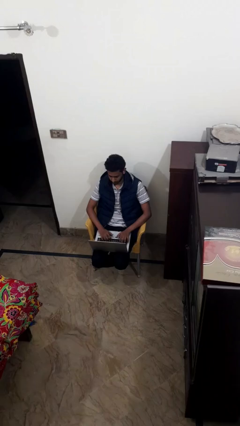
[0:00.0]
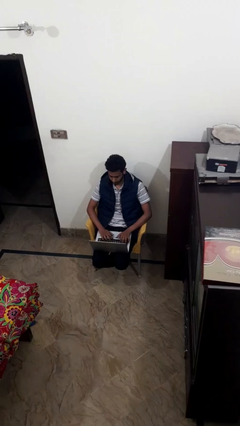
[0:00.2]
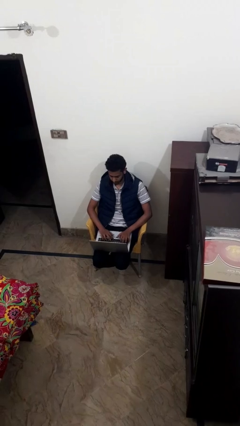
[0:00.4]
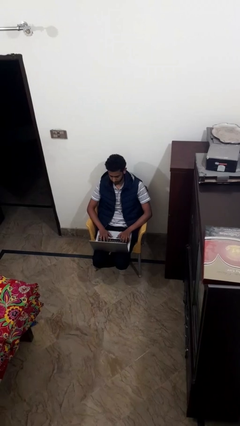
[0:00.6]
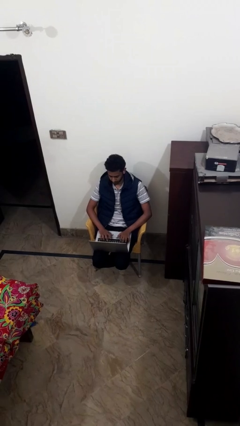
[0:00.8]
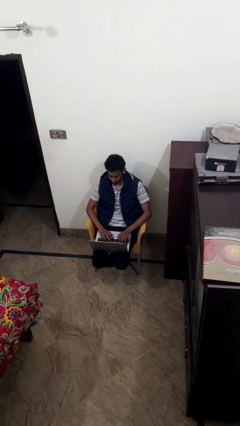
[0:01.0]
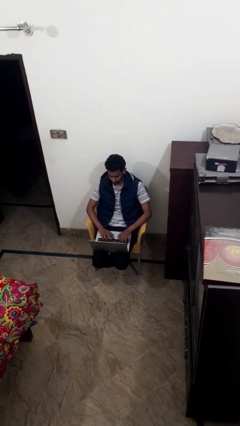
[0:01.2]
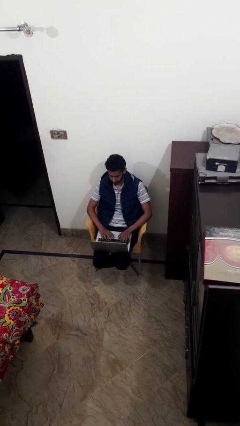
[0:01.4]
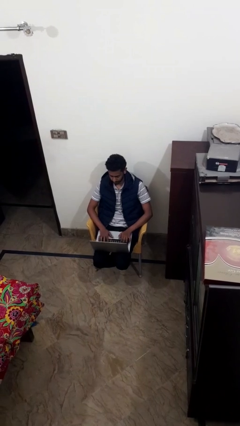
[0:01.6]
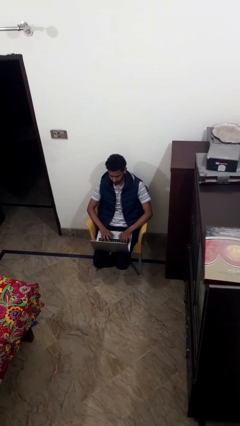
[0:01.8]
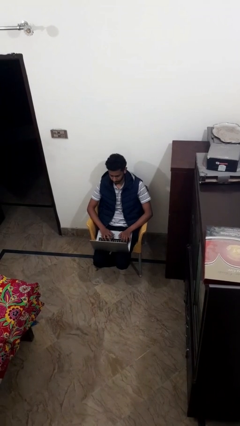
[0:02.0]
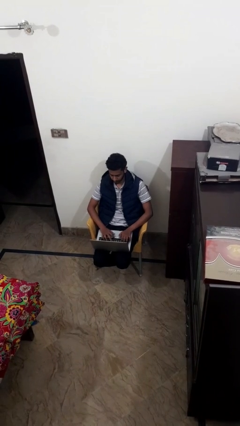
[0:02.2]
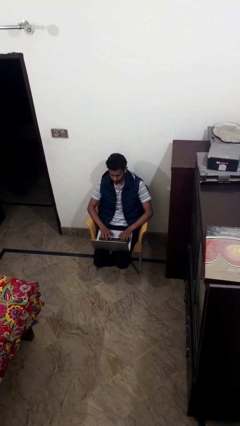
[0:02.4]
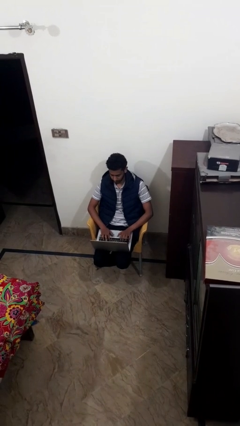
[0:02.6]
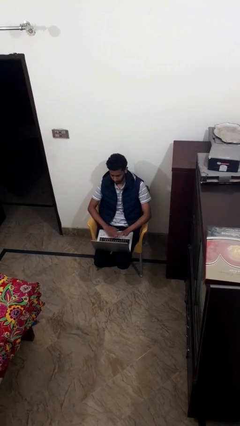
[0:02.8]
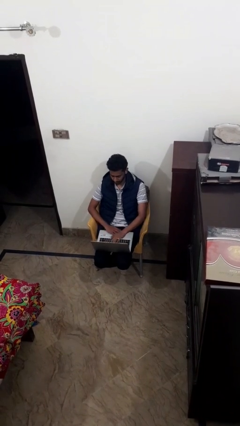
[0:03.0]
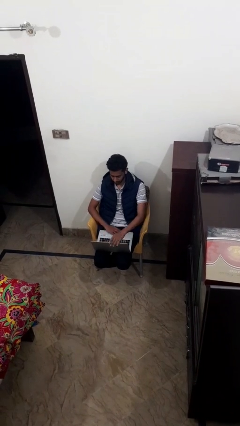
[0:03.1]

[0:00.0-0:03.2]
person interacts with laptop

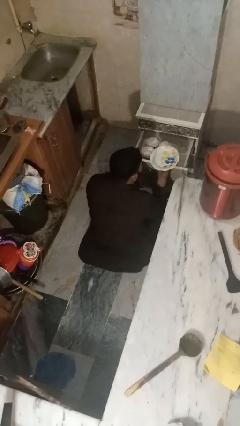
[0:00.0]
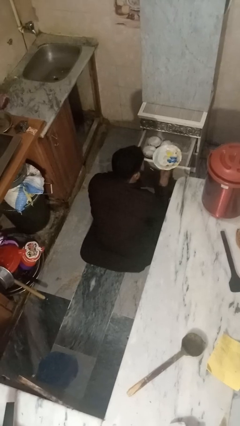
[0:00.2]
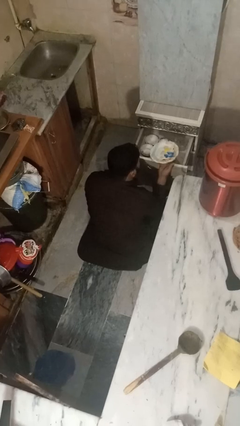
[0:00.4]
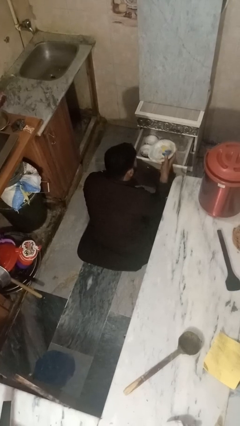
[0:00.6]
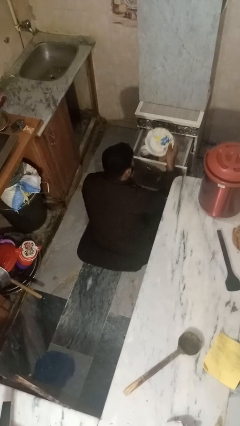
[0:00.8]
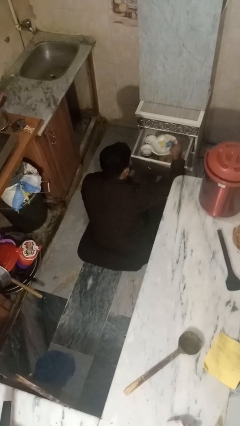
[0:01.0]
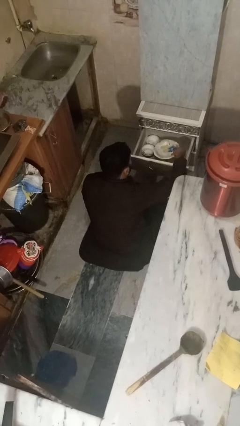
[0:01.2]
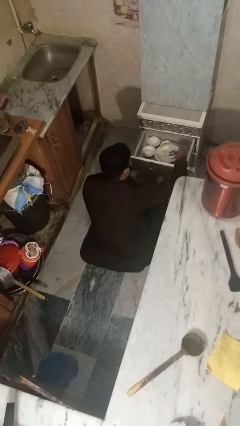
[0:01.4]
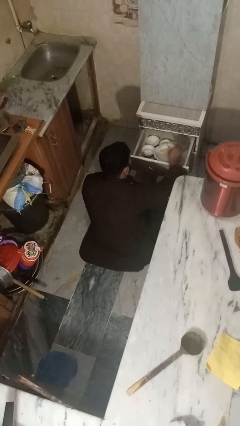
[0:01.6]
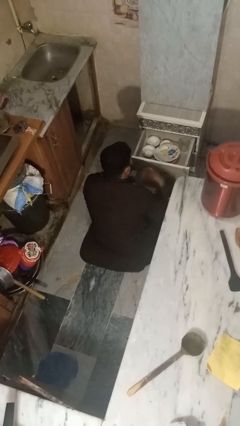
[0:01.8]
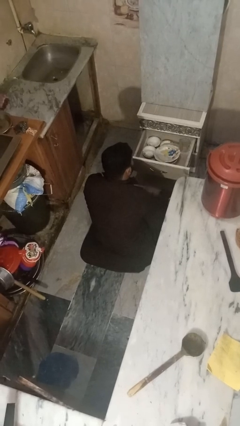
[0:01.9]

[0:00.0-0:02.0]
person puts object into kitchen drawer

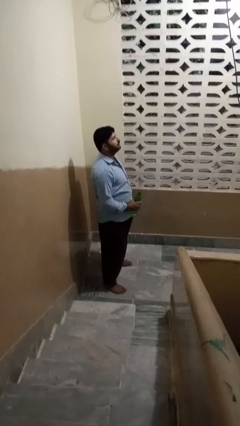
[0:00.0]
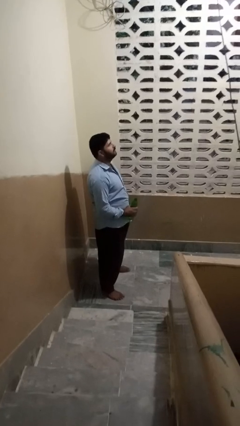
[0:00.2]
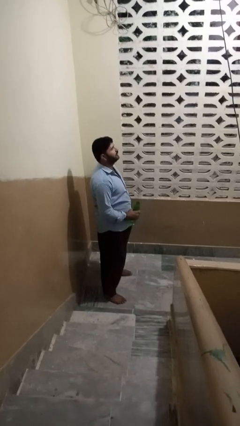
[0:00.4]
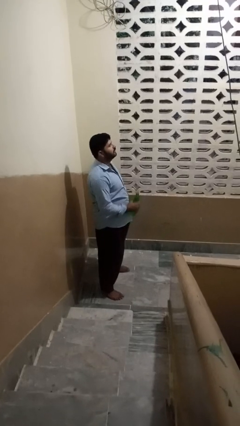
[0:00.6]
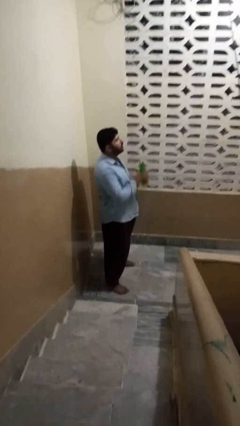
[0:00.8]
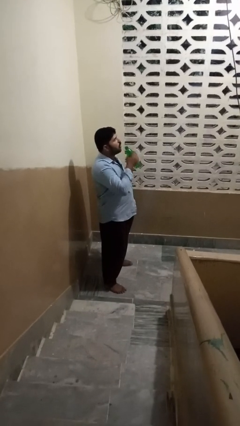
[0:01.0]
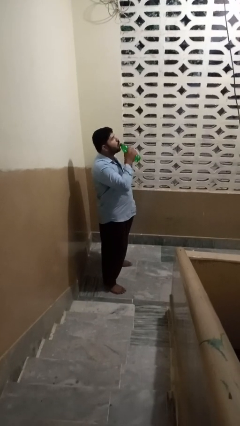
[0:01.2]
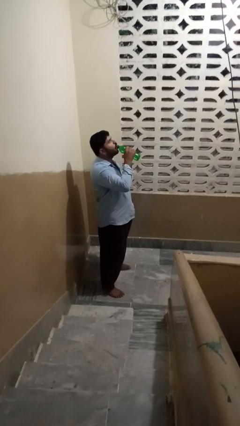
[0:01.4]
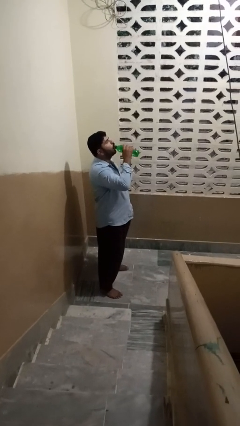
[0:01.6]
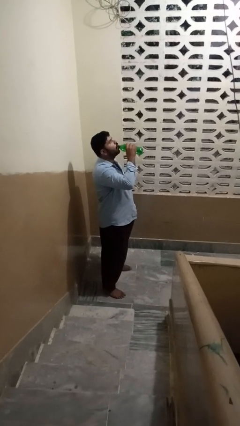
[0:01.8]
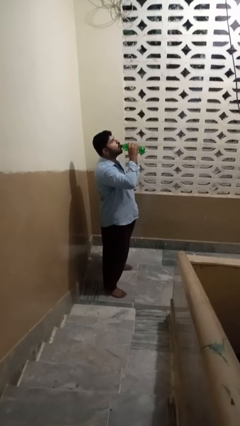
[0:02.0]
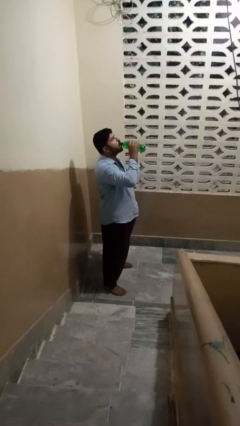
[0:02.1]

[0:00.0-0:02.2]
person drinks from bottle

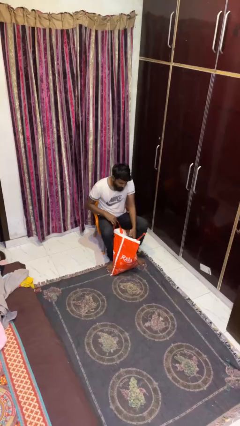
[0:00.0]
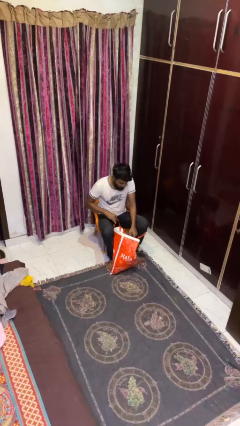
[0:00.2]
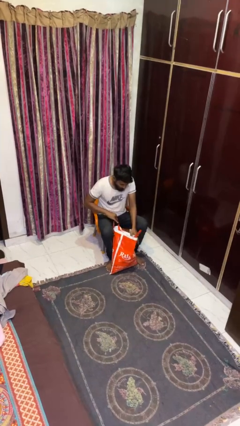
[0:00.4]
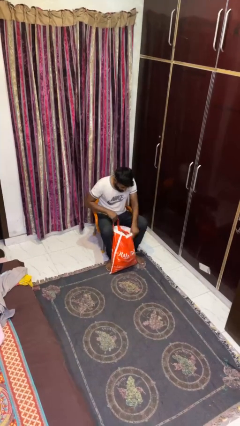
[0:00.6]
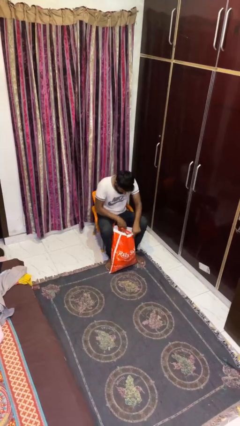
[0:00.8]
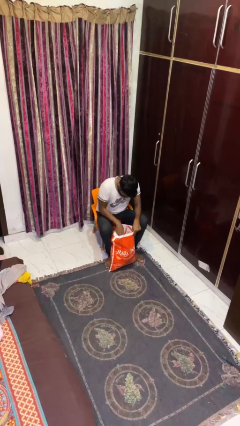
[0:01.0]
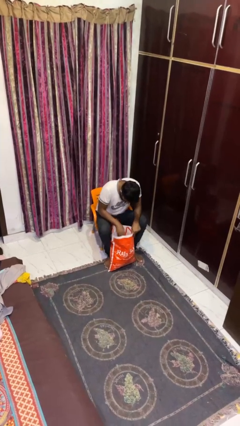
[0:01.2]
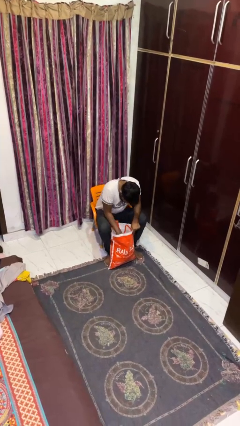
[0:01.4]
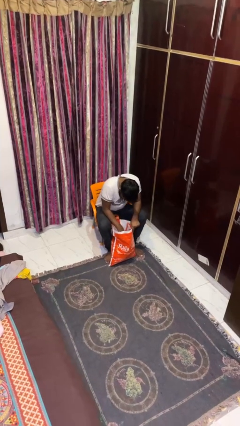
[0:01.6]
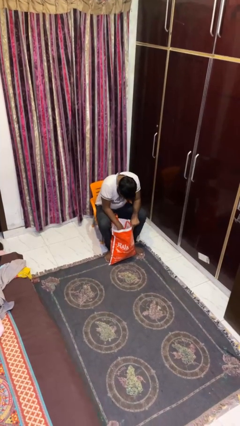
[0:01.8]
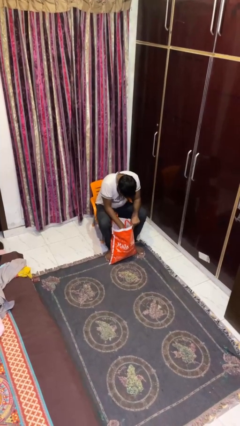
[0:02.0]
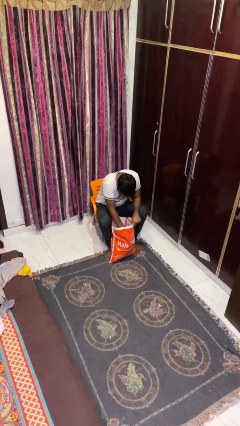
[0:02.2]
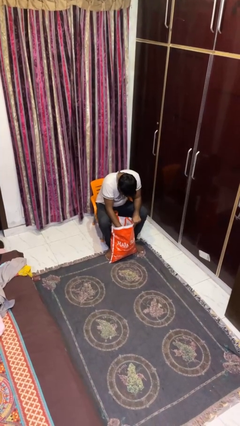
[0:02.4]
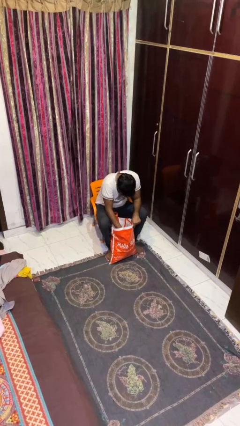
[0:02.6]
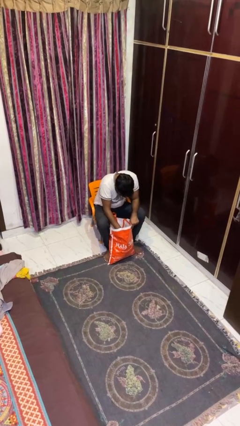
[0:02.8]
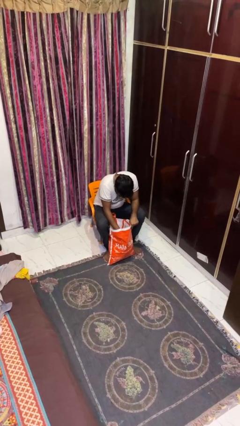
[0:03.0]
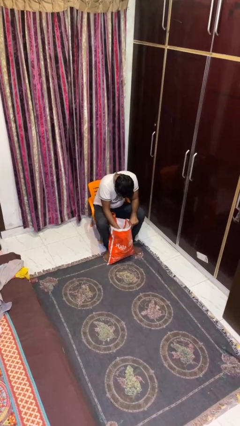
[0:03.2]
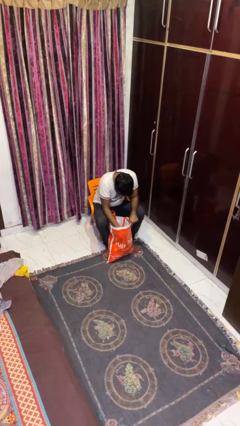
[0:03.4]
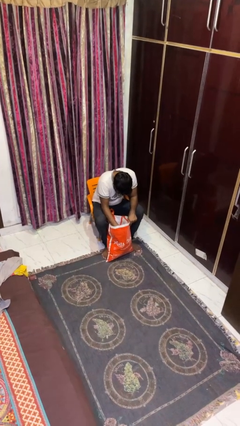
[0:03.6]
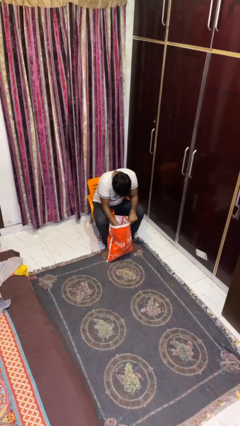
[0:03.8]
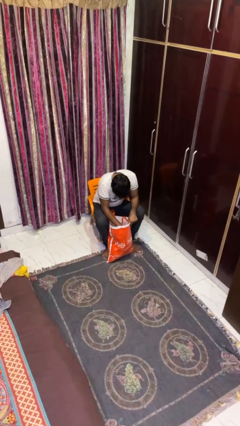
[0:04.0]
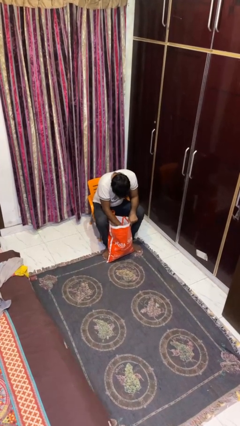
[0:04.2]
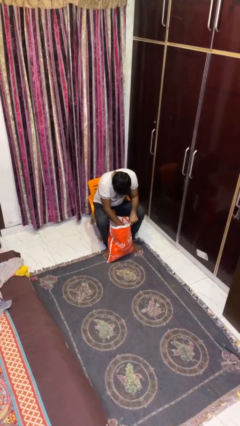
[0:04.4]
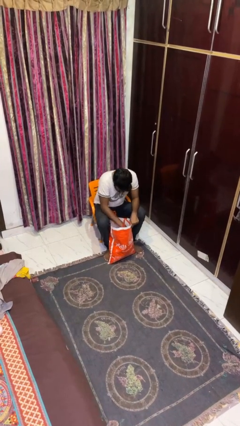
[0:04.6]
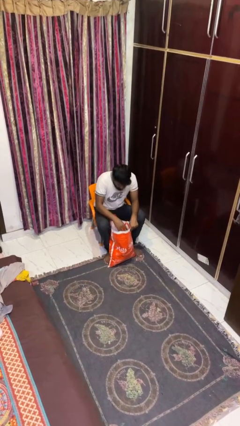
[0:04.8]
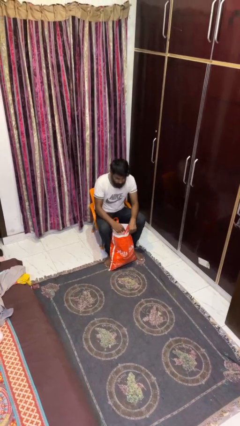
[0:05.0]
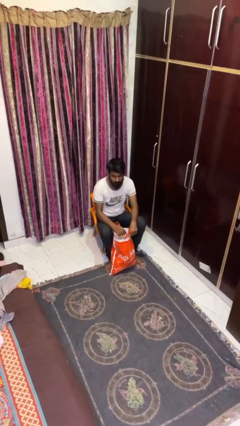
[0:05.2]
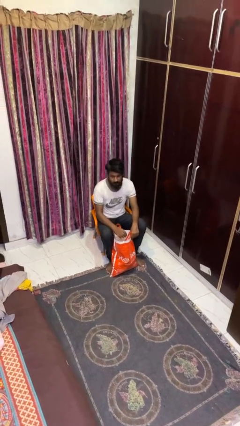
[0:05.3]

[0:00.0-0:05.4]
person searches in bag

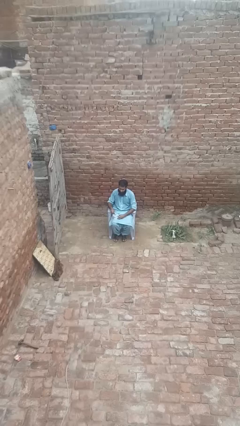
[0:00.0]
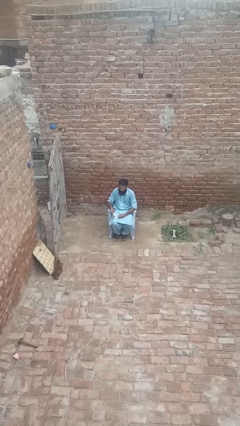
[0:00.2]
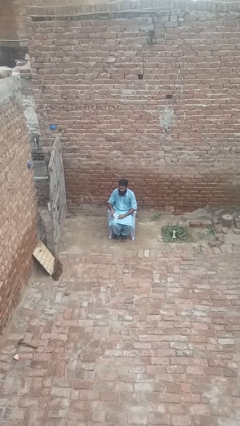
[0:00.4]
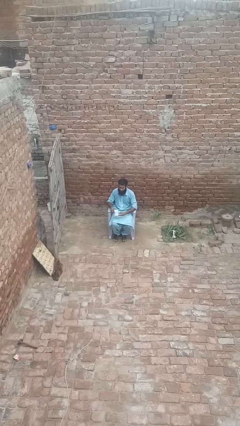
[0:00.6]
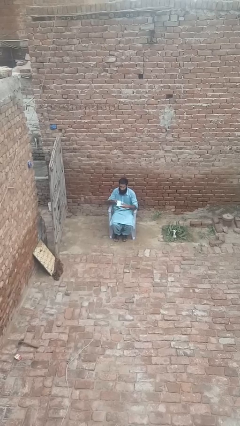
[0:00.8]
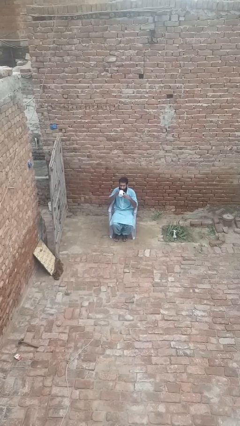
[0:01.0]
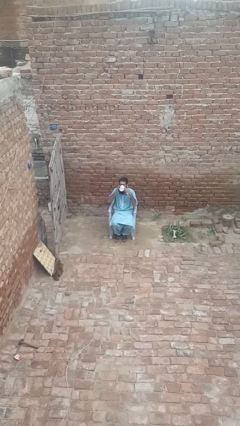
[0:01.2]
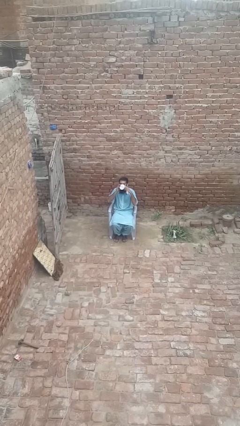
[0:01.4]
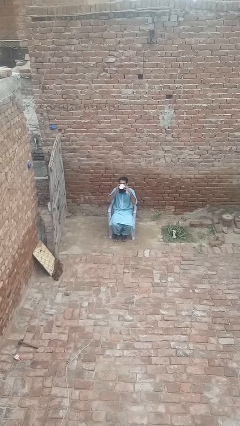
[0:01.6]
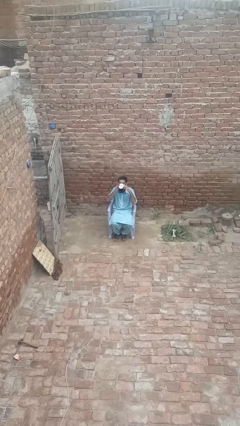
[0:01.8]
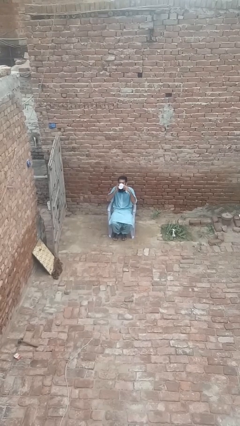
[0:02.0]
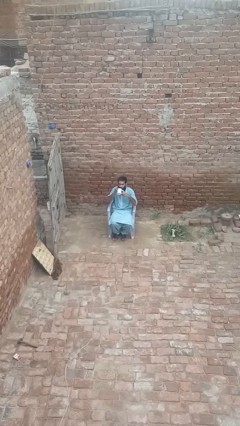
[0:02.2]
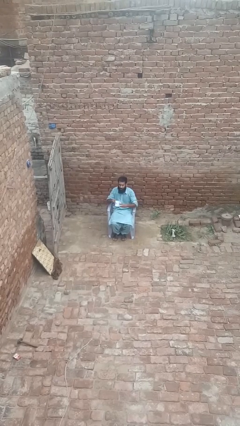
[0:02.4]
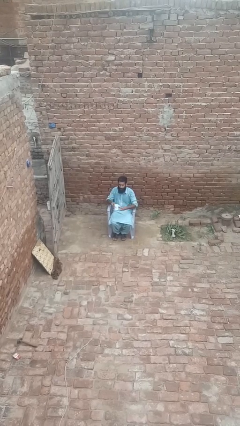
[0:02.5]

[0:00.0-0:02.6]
person drinks from mug

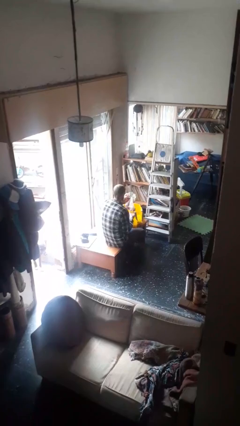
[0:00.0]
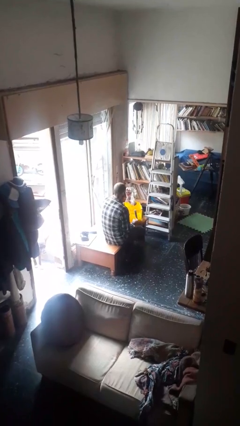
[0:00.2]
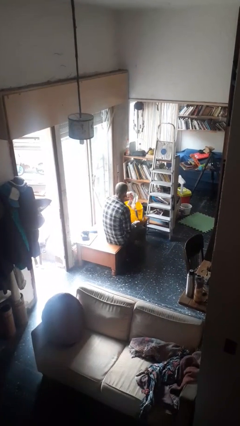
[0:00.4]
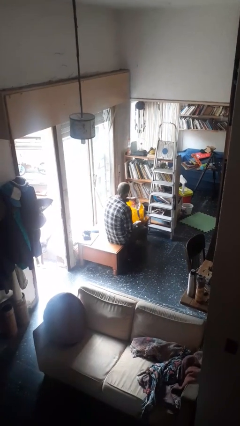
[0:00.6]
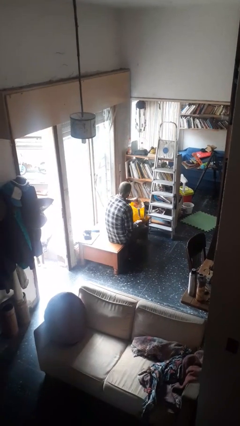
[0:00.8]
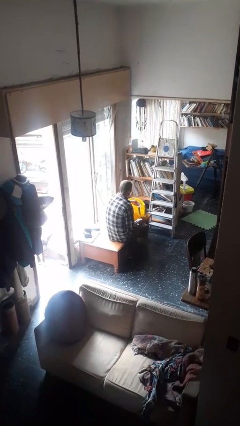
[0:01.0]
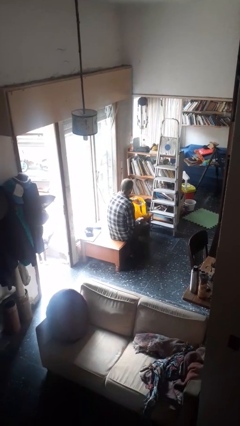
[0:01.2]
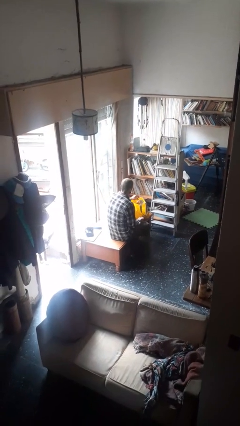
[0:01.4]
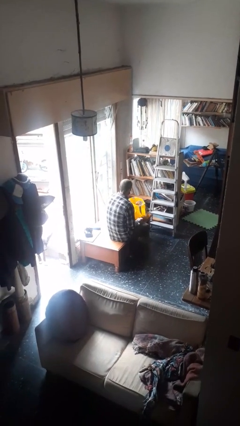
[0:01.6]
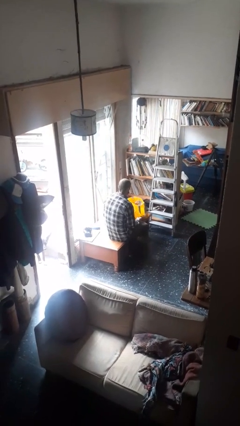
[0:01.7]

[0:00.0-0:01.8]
person puts object into bag

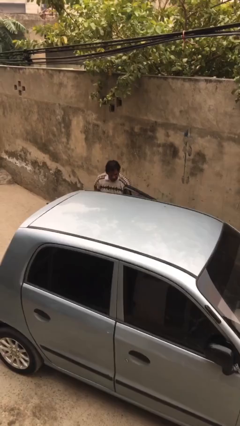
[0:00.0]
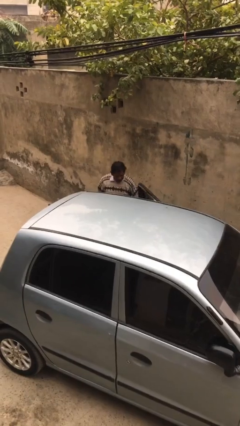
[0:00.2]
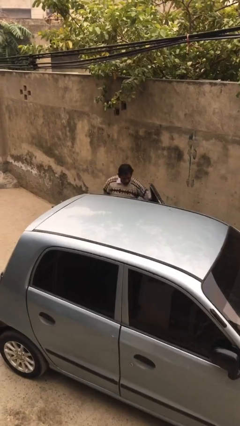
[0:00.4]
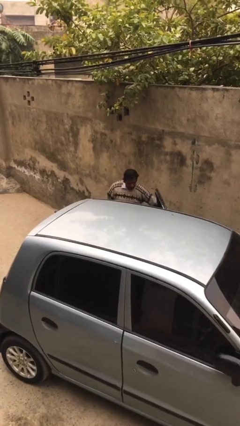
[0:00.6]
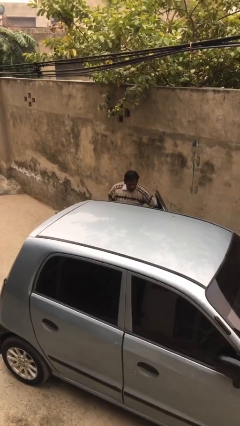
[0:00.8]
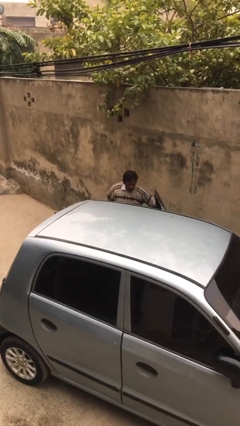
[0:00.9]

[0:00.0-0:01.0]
person opens car door
